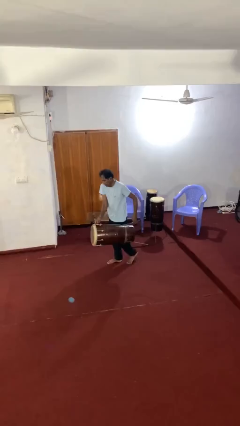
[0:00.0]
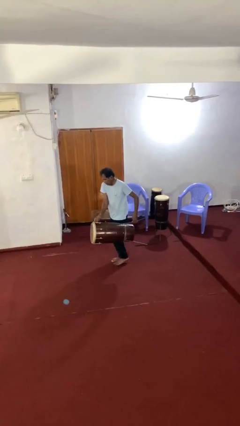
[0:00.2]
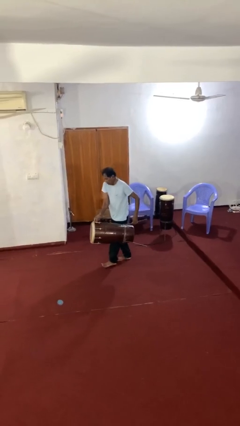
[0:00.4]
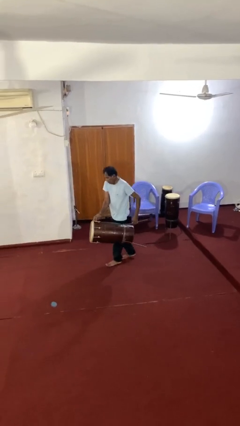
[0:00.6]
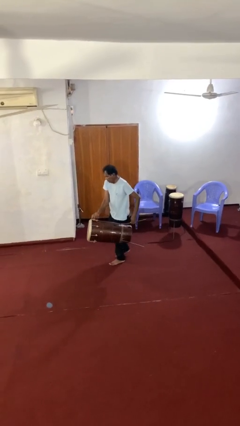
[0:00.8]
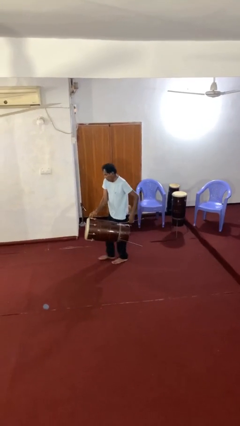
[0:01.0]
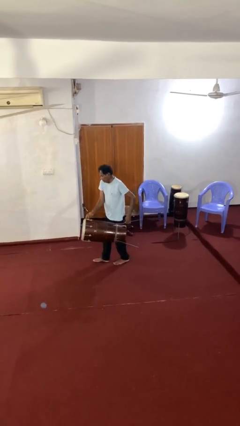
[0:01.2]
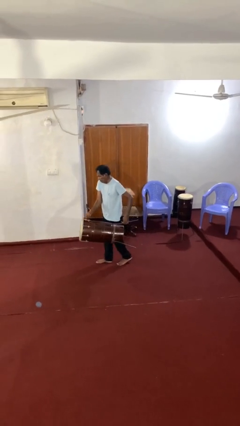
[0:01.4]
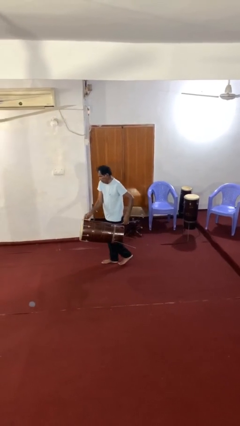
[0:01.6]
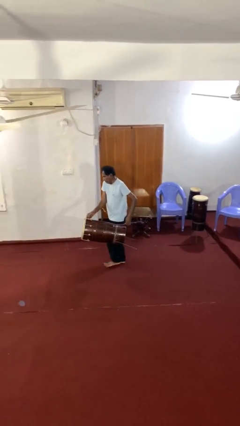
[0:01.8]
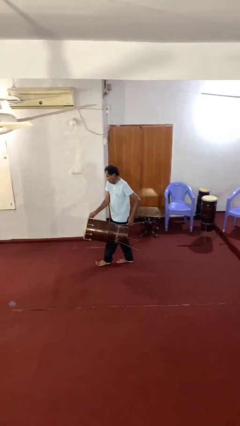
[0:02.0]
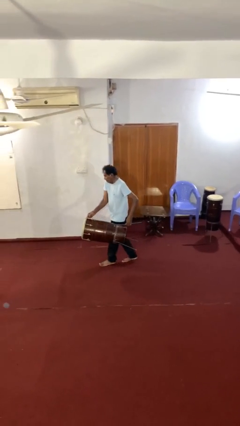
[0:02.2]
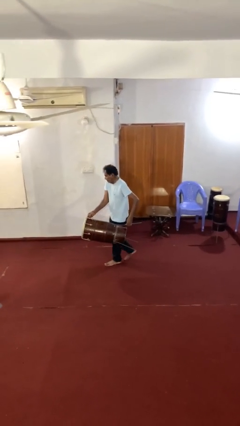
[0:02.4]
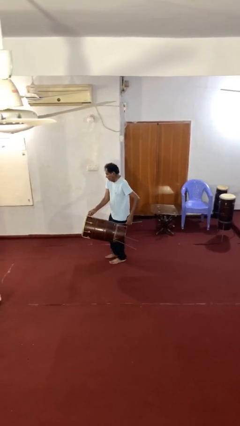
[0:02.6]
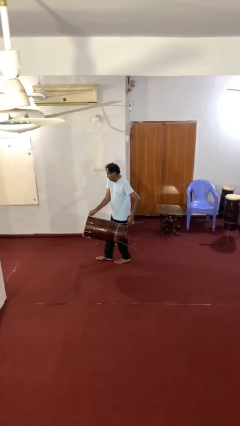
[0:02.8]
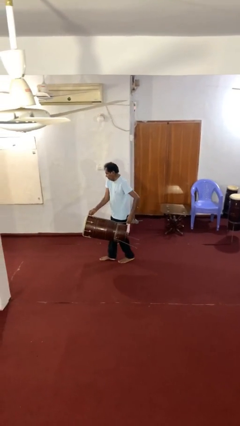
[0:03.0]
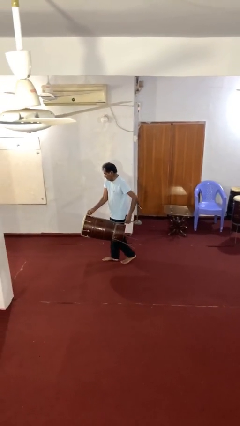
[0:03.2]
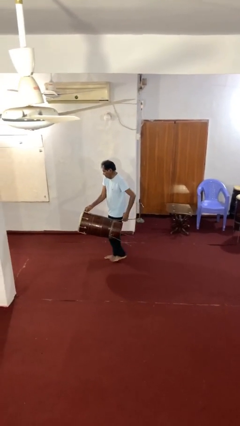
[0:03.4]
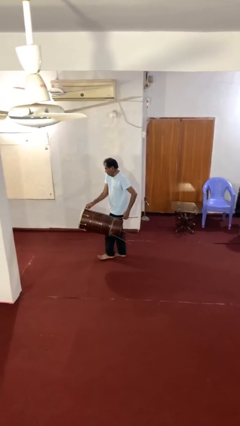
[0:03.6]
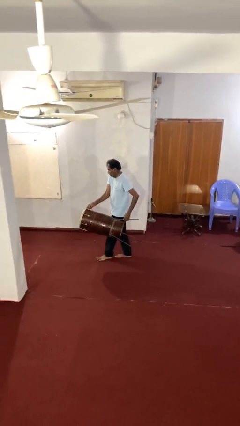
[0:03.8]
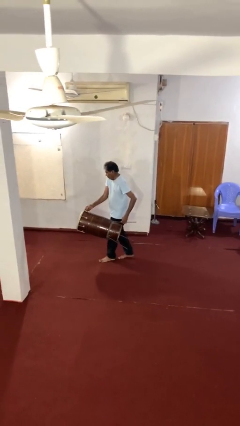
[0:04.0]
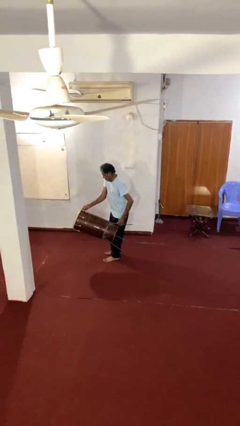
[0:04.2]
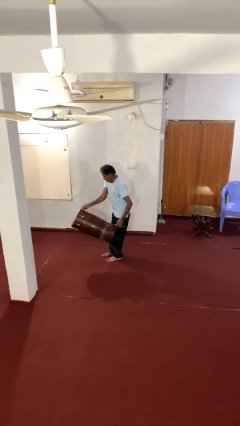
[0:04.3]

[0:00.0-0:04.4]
person carries heavy object

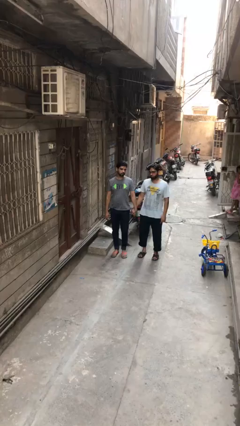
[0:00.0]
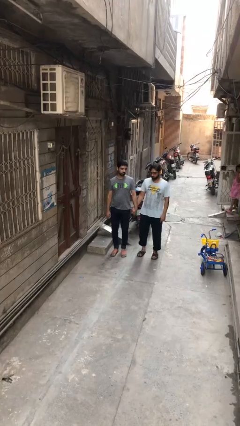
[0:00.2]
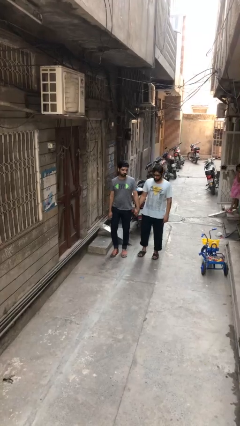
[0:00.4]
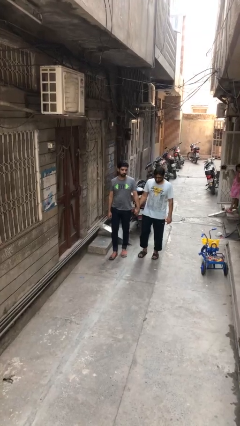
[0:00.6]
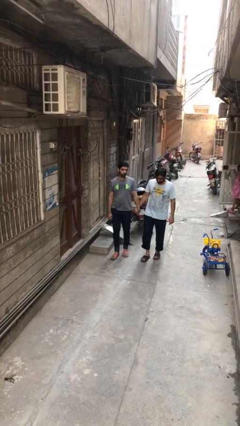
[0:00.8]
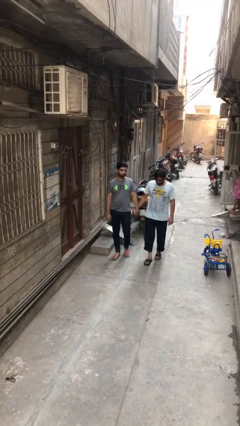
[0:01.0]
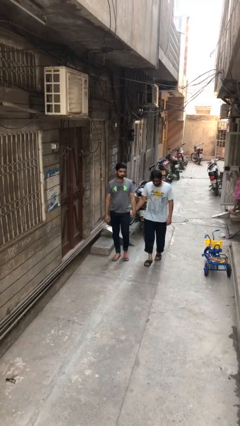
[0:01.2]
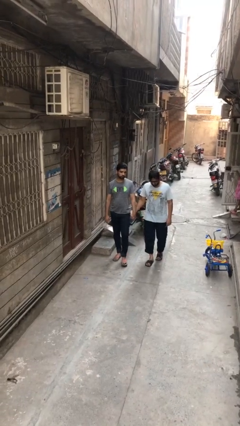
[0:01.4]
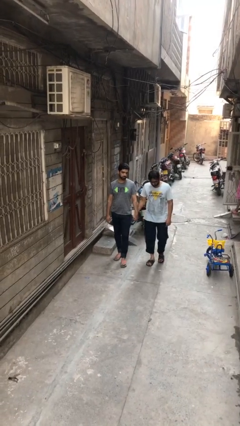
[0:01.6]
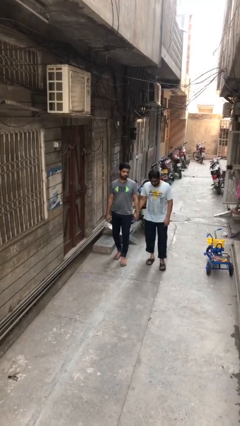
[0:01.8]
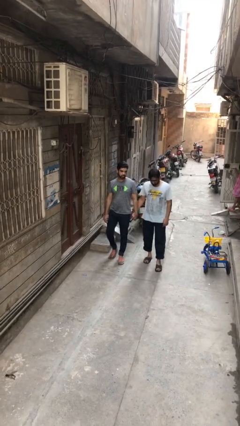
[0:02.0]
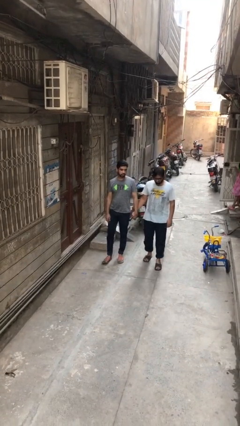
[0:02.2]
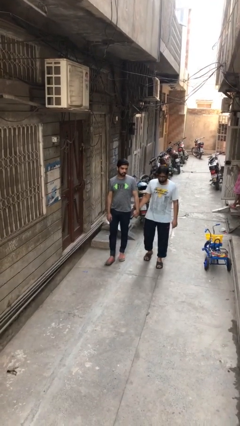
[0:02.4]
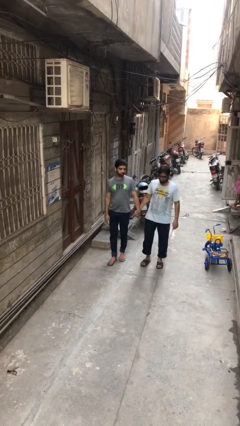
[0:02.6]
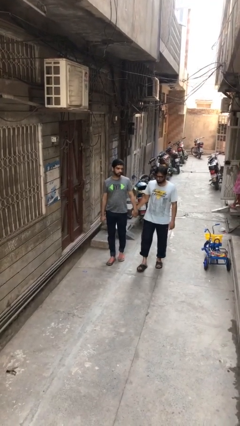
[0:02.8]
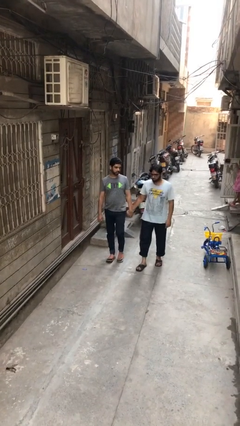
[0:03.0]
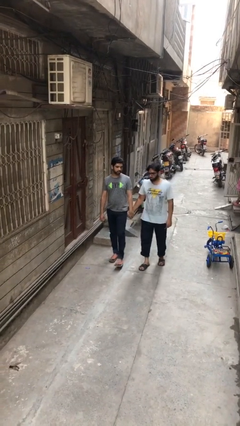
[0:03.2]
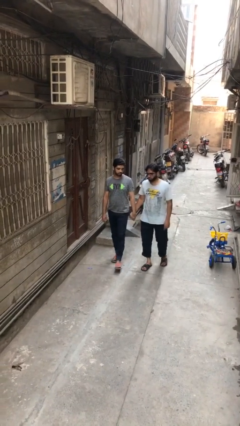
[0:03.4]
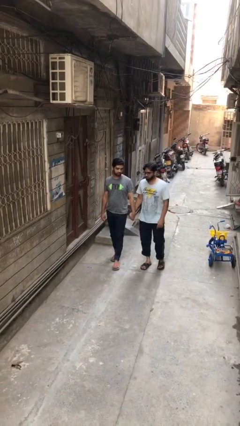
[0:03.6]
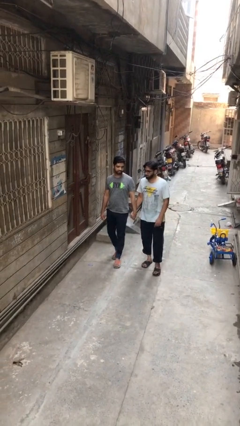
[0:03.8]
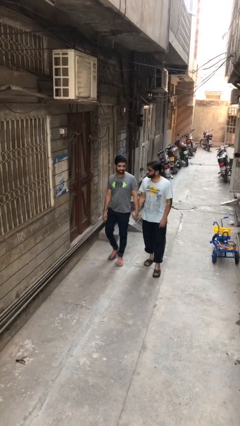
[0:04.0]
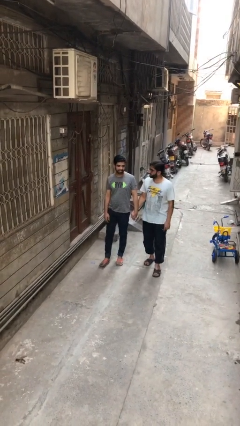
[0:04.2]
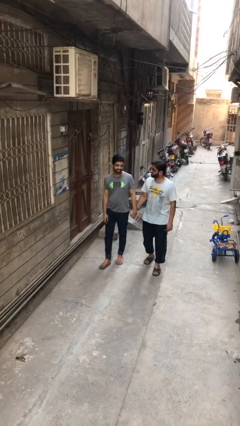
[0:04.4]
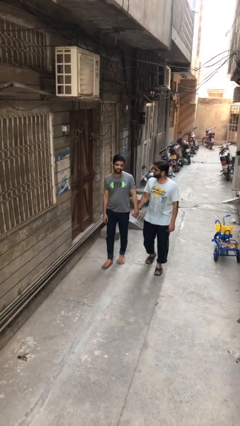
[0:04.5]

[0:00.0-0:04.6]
person holds hand

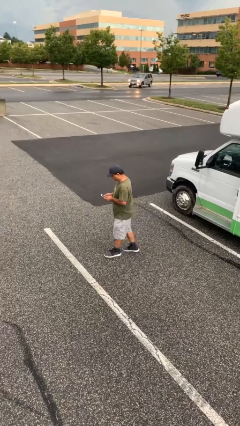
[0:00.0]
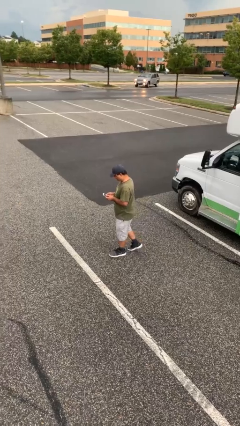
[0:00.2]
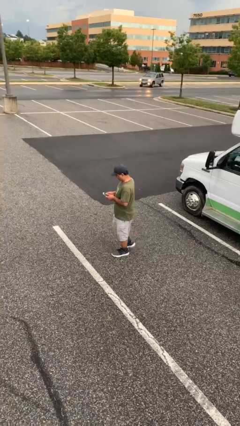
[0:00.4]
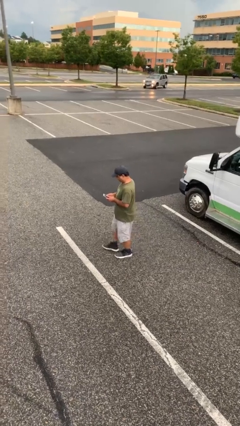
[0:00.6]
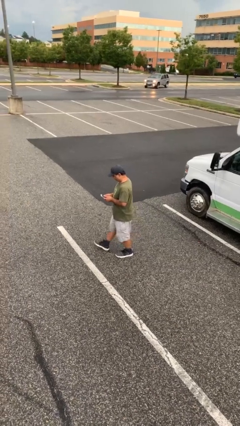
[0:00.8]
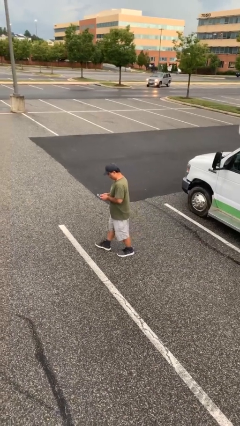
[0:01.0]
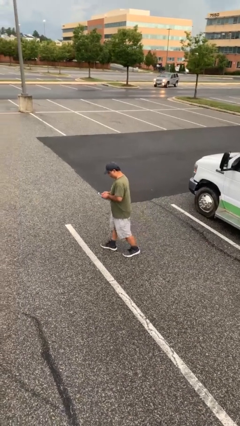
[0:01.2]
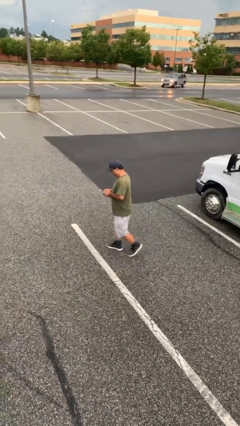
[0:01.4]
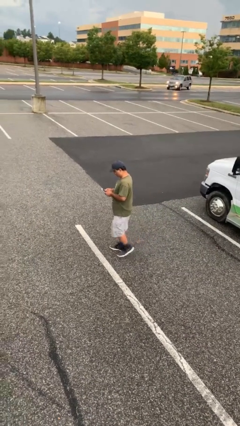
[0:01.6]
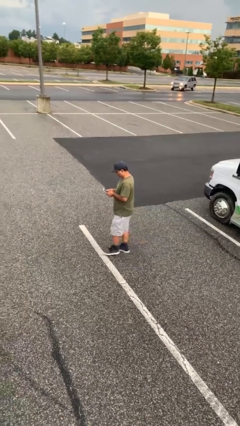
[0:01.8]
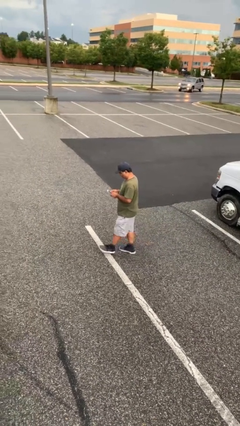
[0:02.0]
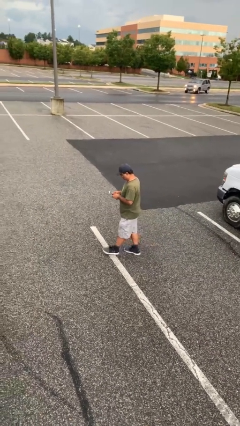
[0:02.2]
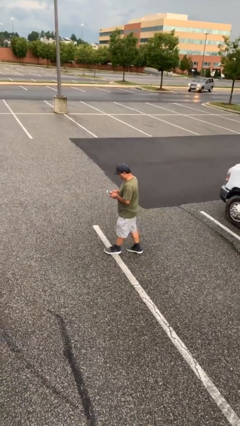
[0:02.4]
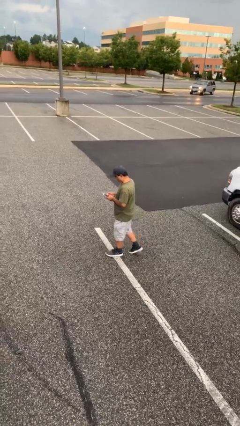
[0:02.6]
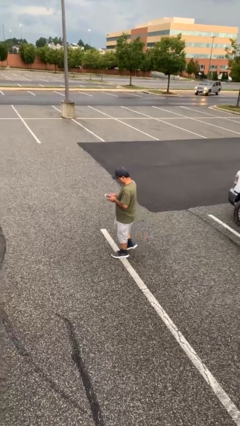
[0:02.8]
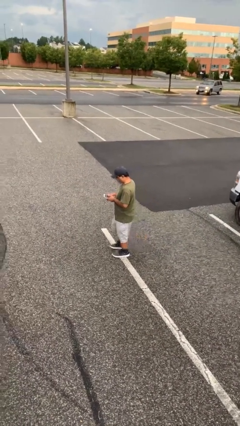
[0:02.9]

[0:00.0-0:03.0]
person texts on phone

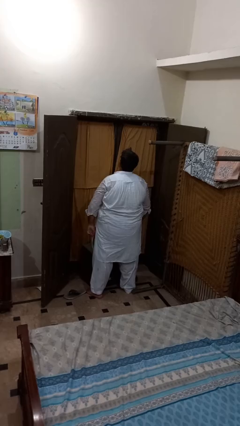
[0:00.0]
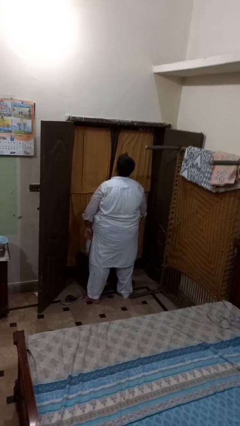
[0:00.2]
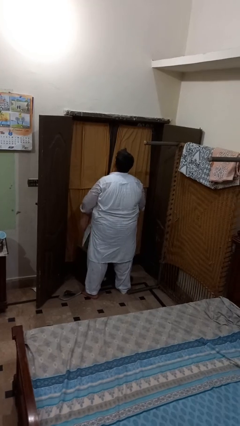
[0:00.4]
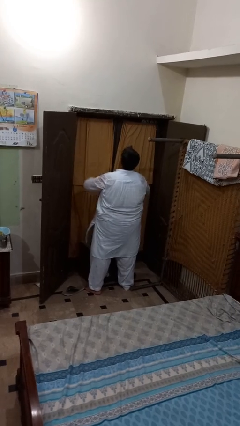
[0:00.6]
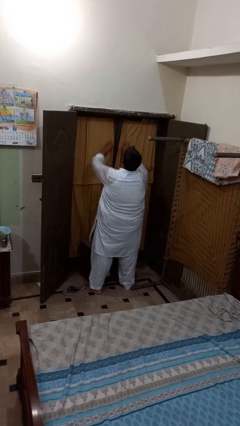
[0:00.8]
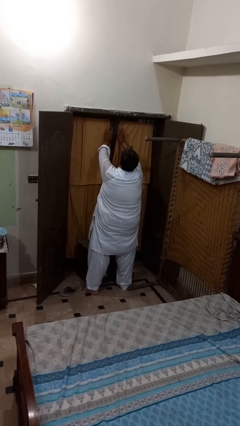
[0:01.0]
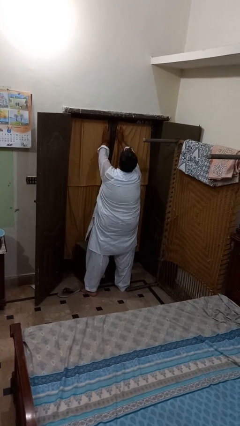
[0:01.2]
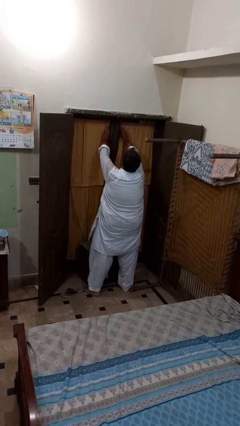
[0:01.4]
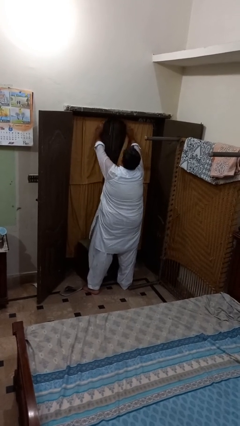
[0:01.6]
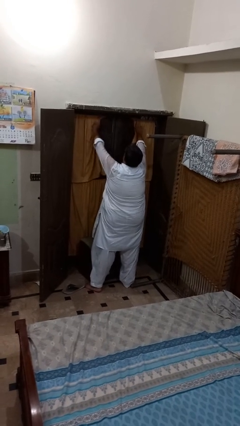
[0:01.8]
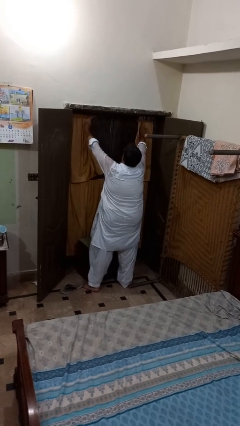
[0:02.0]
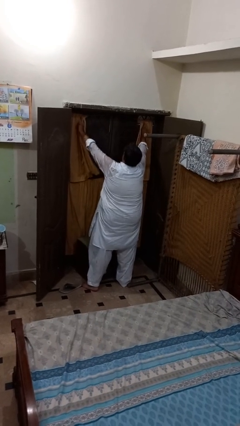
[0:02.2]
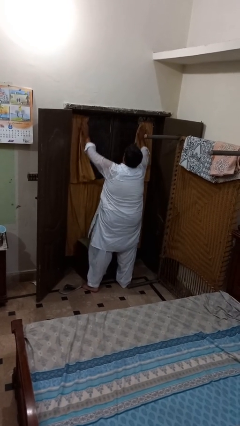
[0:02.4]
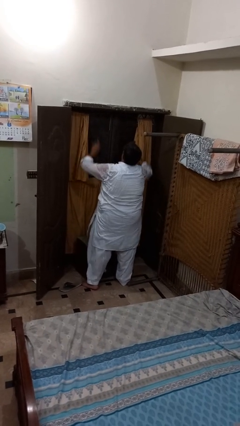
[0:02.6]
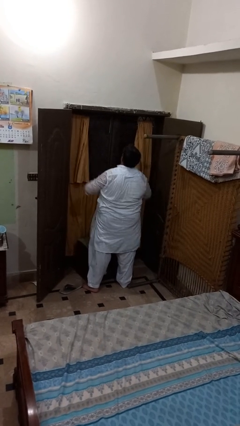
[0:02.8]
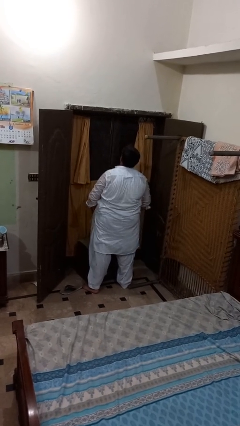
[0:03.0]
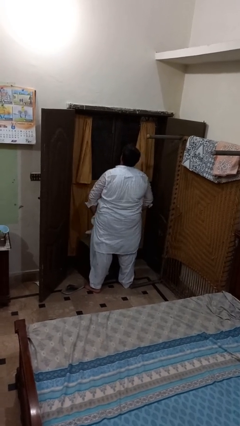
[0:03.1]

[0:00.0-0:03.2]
person opens curtains

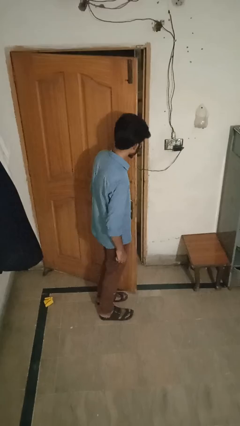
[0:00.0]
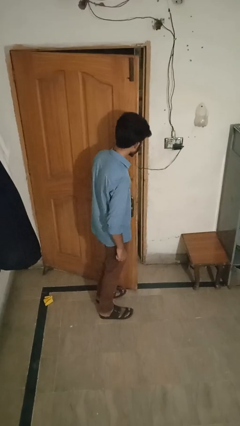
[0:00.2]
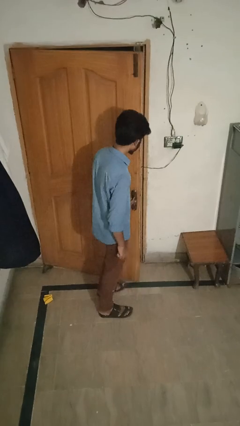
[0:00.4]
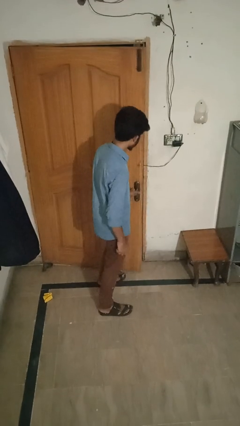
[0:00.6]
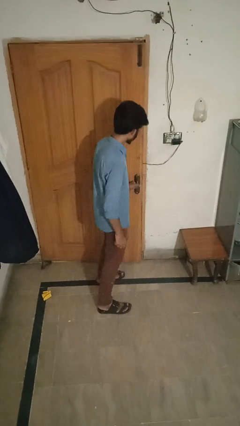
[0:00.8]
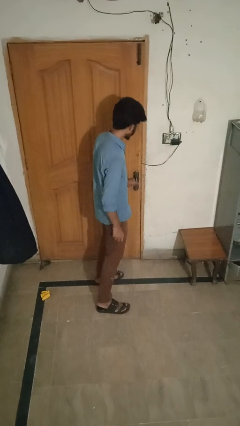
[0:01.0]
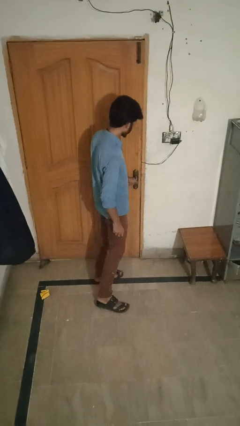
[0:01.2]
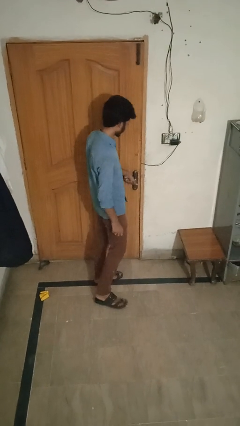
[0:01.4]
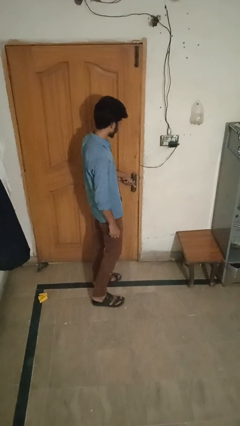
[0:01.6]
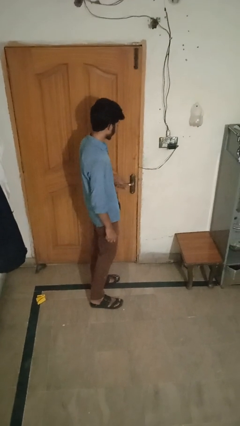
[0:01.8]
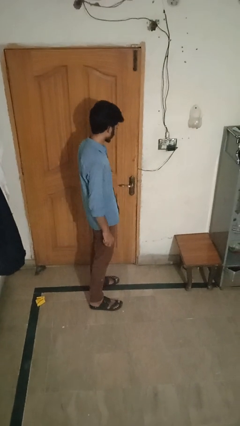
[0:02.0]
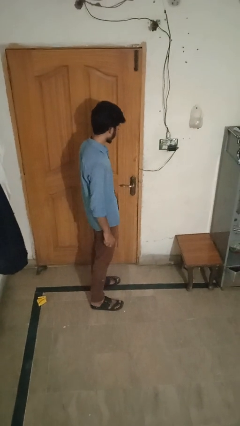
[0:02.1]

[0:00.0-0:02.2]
person closes facility door
